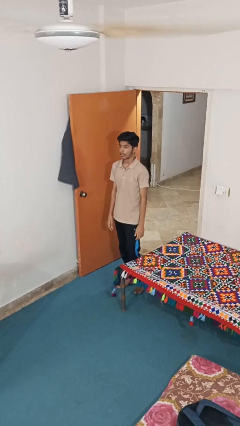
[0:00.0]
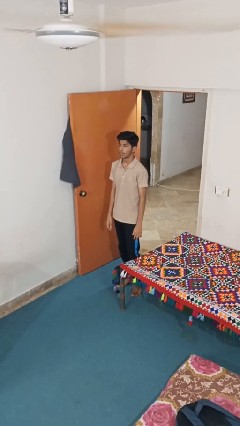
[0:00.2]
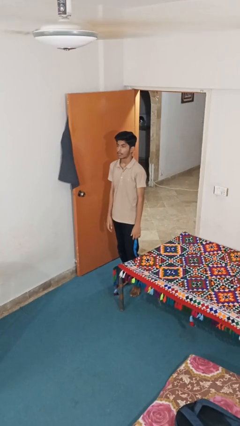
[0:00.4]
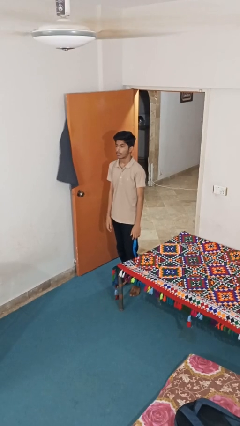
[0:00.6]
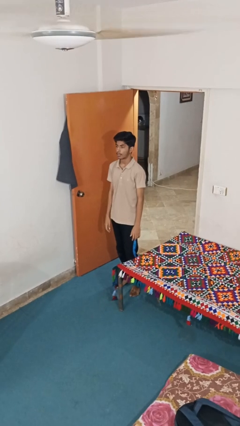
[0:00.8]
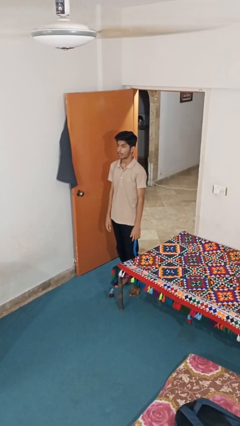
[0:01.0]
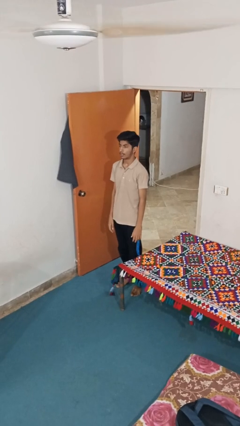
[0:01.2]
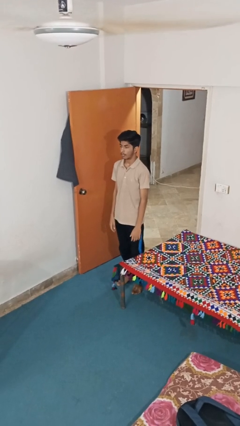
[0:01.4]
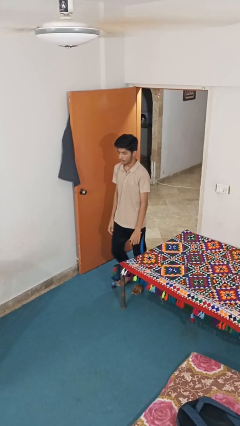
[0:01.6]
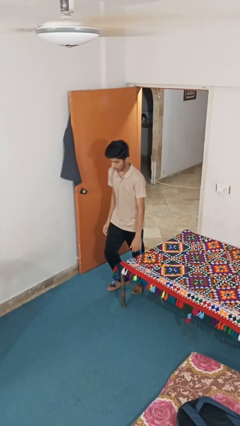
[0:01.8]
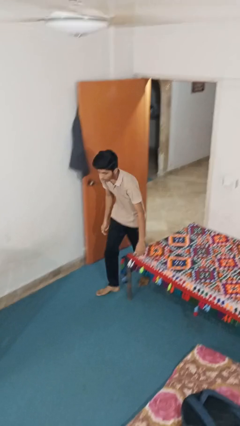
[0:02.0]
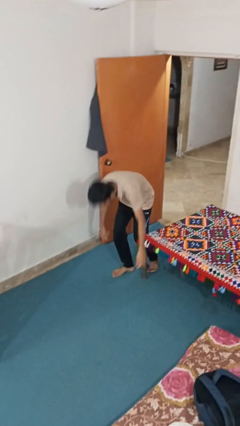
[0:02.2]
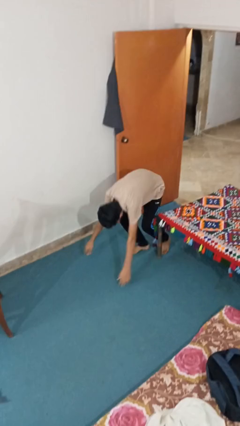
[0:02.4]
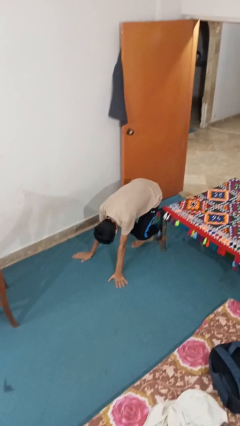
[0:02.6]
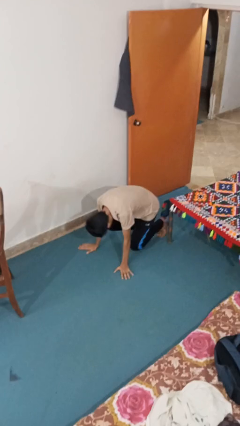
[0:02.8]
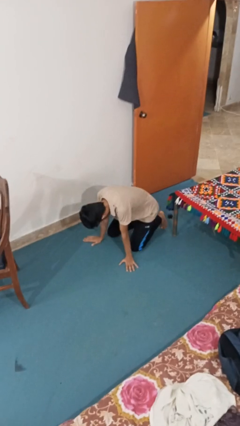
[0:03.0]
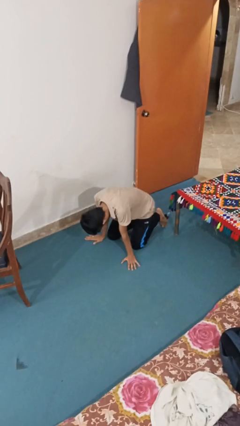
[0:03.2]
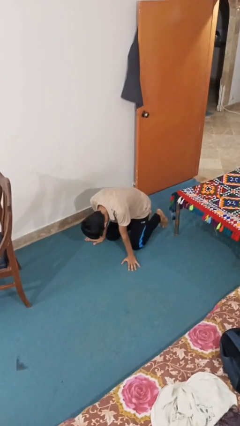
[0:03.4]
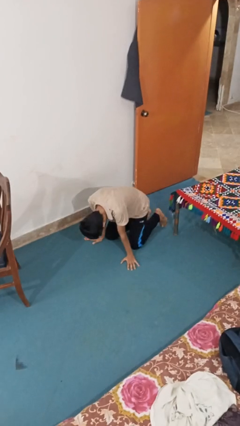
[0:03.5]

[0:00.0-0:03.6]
person trips on object on floor

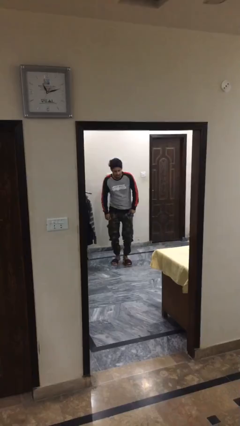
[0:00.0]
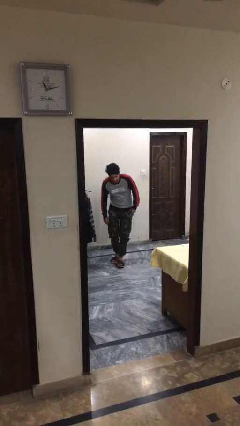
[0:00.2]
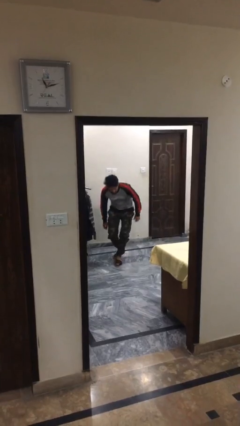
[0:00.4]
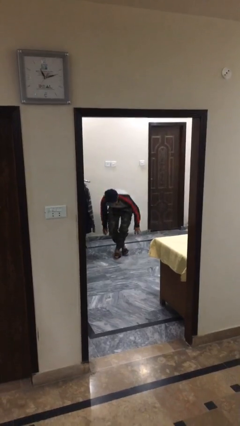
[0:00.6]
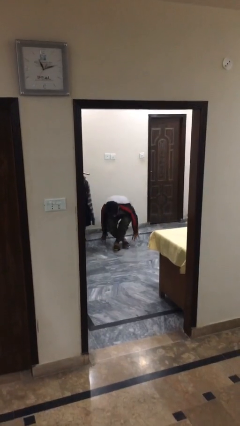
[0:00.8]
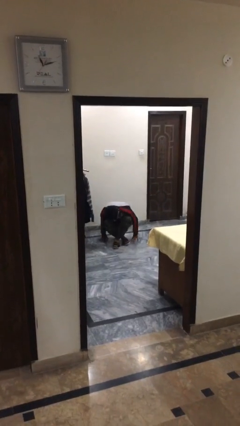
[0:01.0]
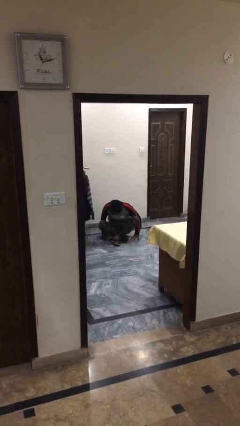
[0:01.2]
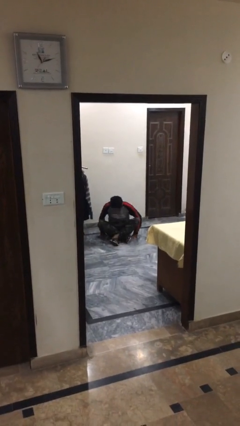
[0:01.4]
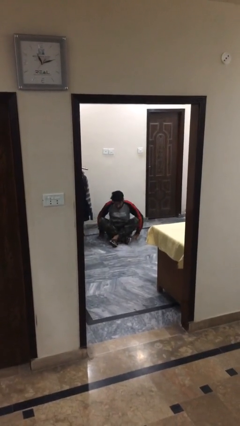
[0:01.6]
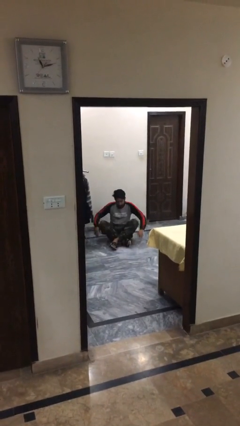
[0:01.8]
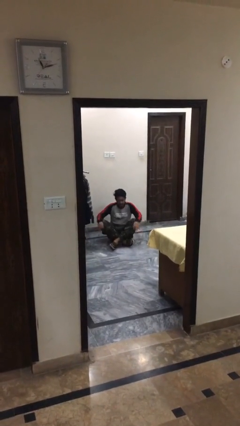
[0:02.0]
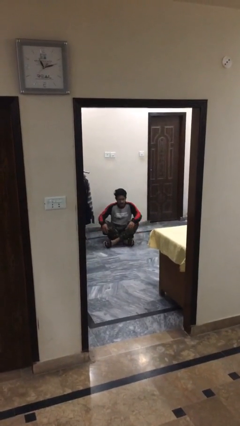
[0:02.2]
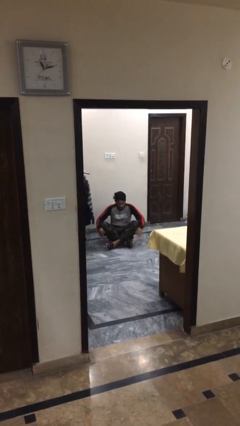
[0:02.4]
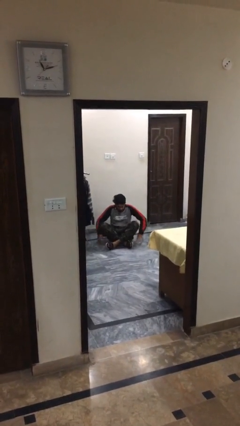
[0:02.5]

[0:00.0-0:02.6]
person sits down

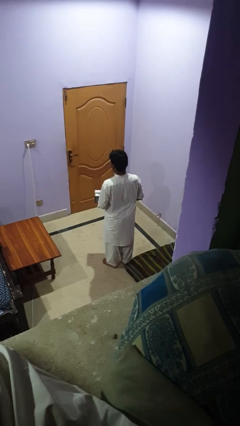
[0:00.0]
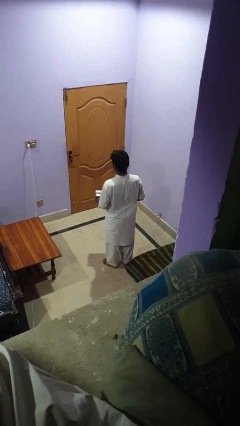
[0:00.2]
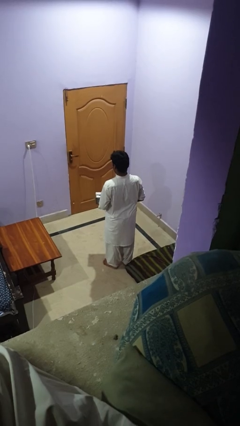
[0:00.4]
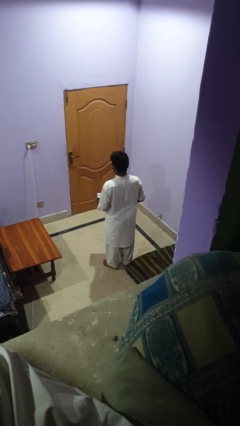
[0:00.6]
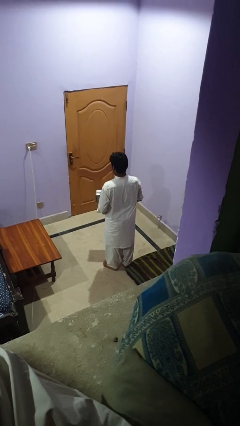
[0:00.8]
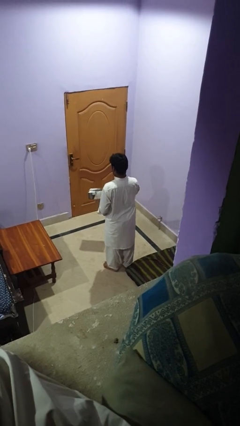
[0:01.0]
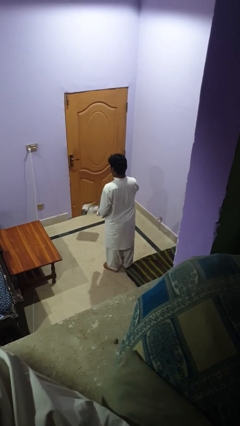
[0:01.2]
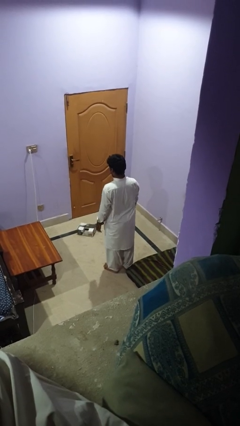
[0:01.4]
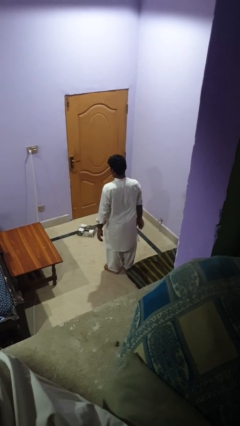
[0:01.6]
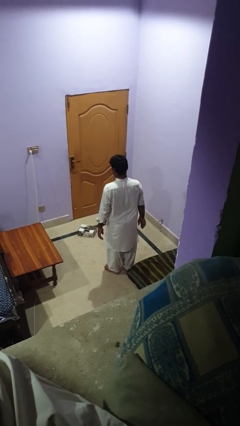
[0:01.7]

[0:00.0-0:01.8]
person throws object to ground

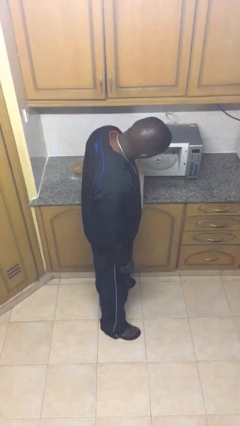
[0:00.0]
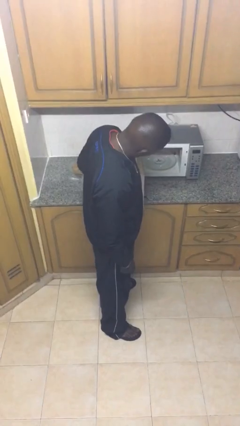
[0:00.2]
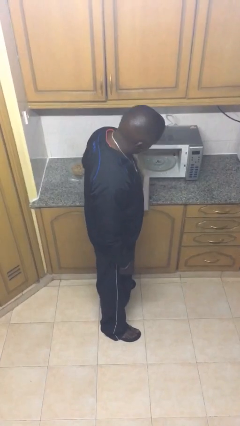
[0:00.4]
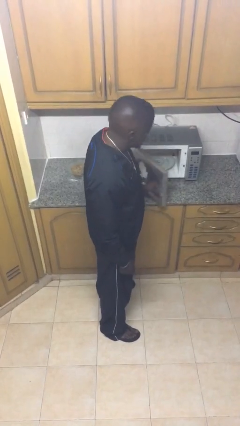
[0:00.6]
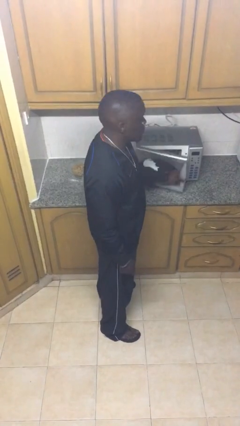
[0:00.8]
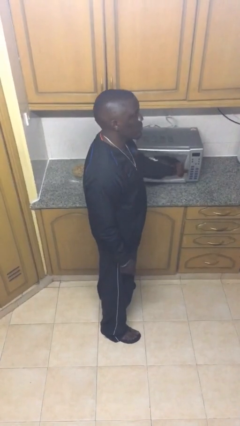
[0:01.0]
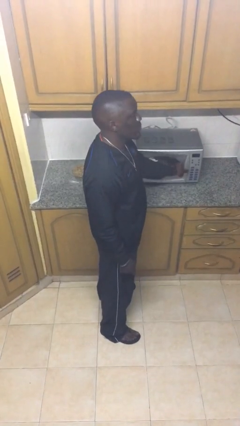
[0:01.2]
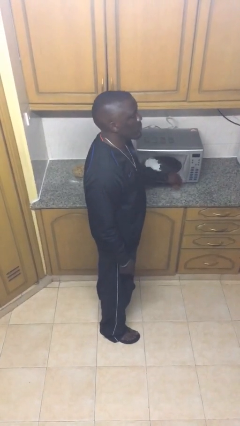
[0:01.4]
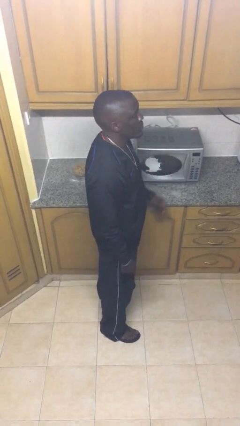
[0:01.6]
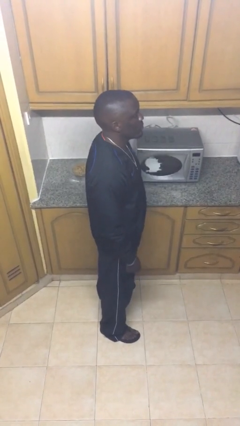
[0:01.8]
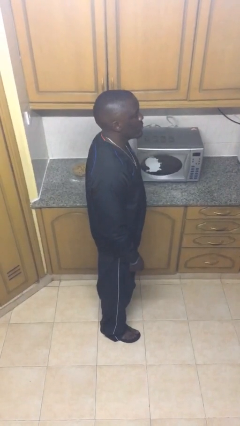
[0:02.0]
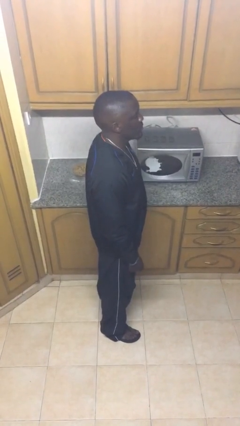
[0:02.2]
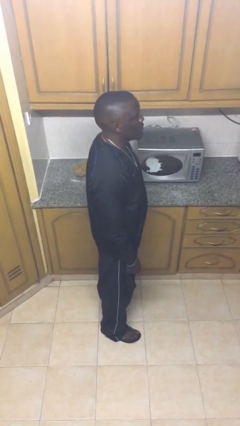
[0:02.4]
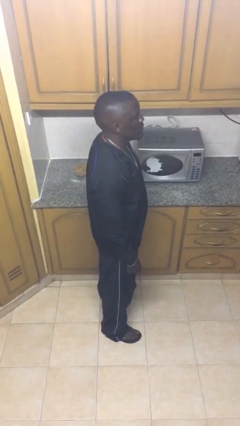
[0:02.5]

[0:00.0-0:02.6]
person closes microwave

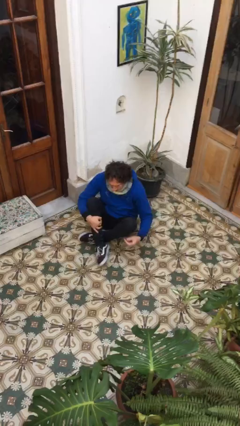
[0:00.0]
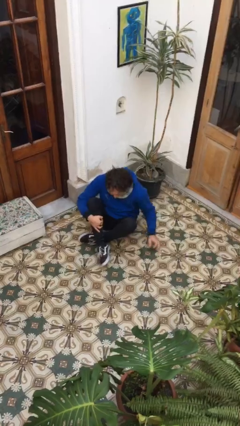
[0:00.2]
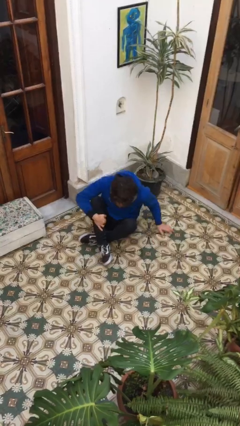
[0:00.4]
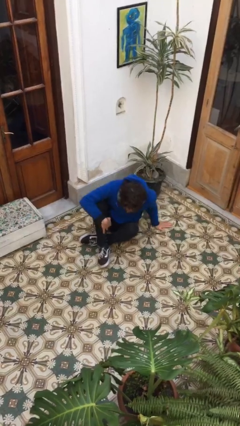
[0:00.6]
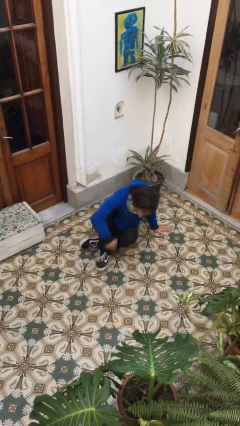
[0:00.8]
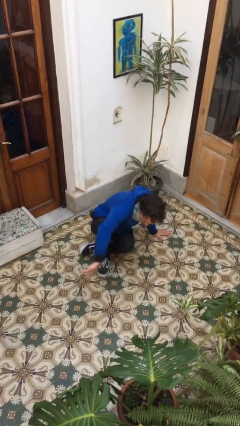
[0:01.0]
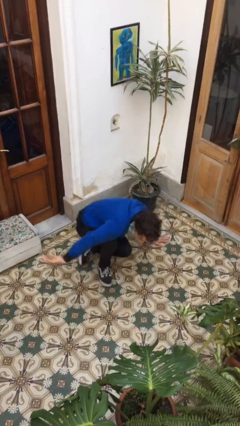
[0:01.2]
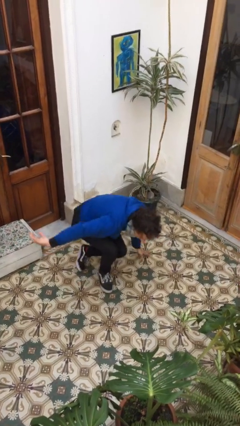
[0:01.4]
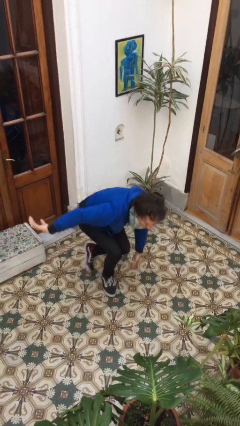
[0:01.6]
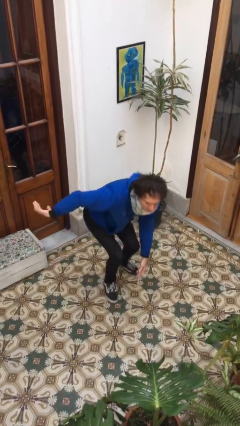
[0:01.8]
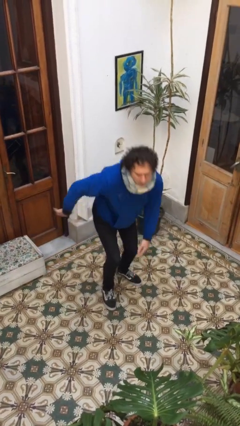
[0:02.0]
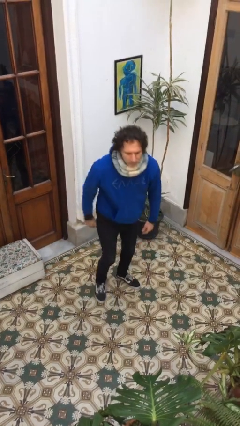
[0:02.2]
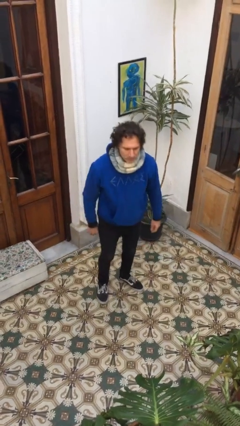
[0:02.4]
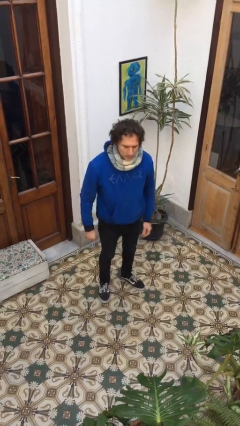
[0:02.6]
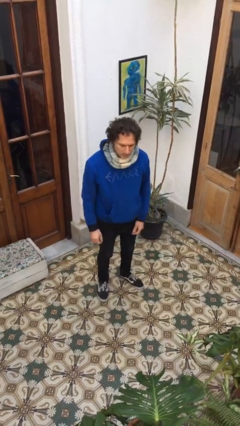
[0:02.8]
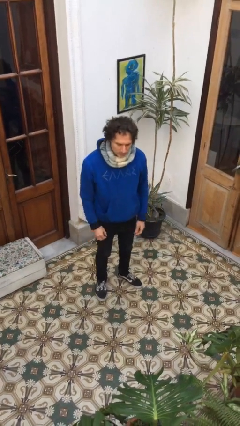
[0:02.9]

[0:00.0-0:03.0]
person stands up from floor

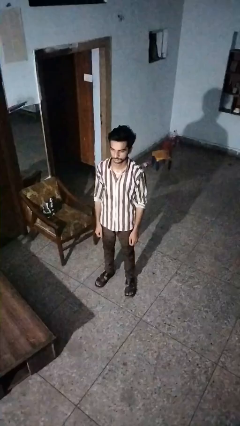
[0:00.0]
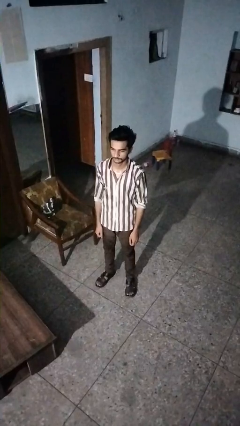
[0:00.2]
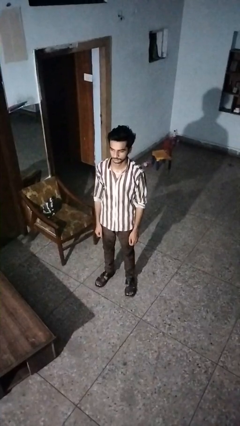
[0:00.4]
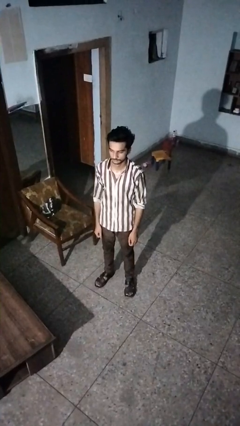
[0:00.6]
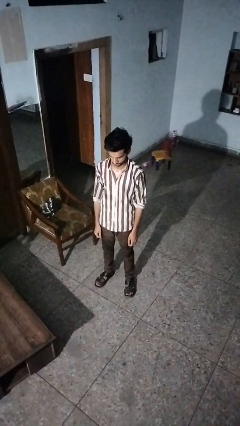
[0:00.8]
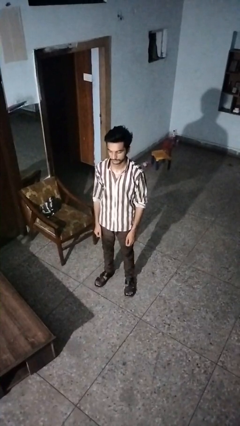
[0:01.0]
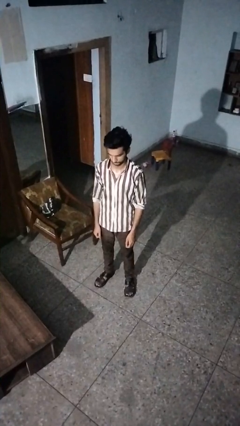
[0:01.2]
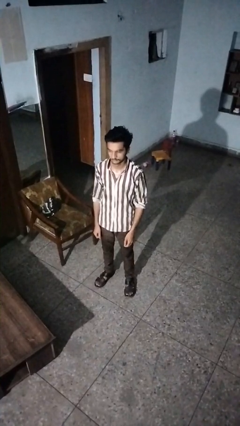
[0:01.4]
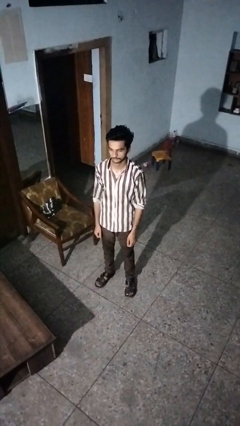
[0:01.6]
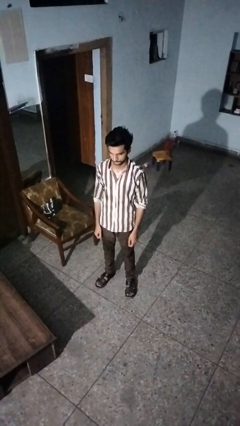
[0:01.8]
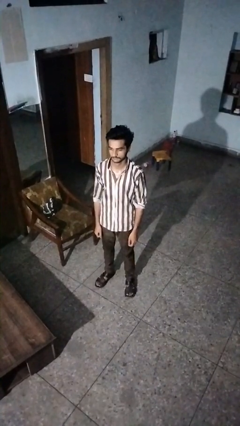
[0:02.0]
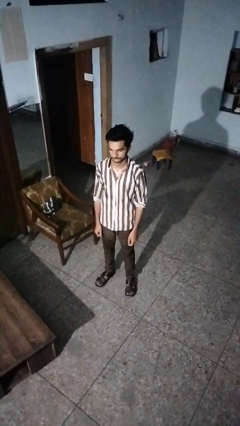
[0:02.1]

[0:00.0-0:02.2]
person nods head

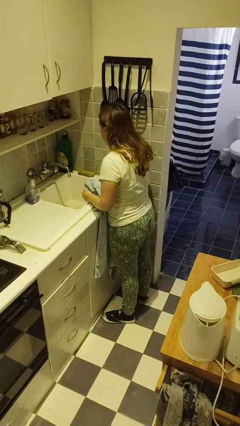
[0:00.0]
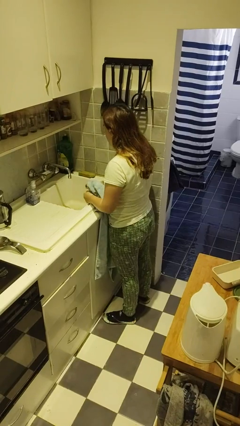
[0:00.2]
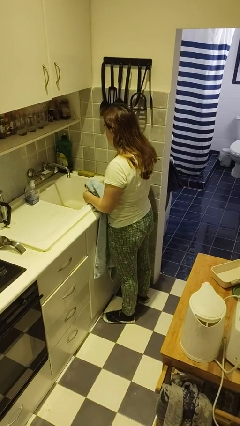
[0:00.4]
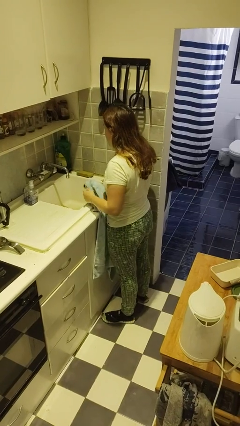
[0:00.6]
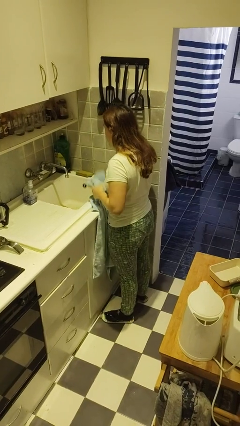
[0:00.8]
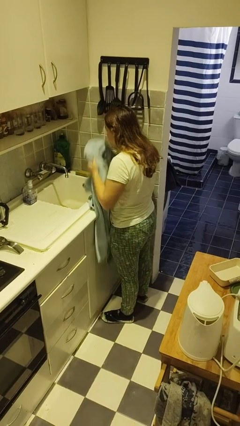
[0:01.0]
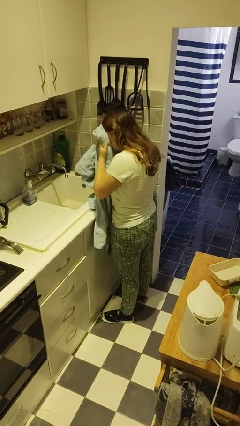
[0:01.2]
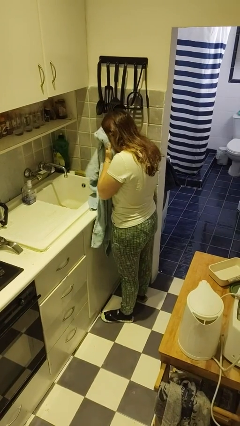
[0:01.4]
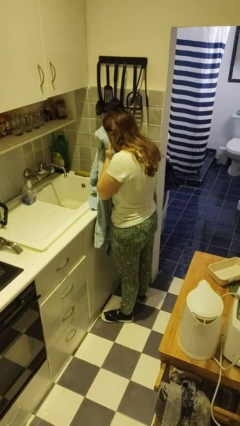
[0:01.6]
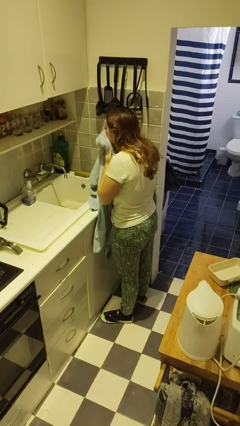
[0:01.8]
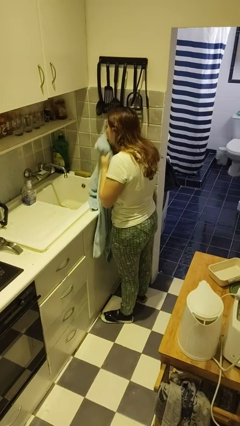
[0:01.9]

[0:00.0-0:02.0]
person dries face with towel
